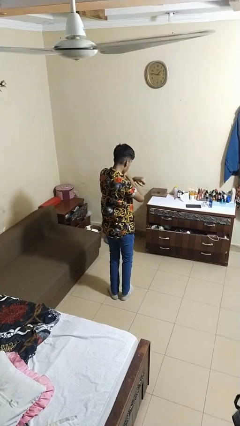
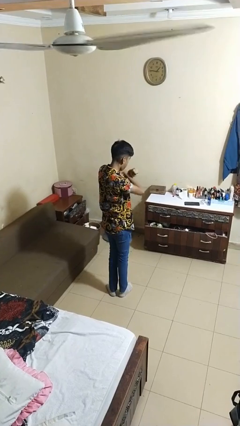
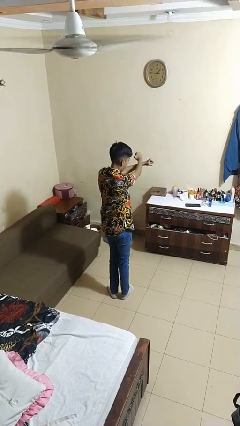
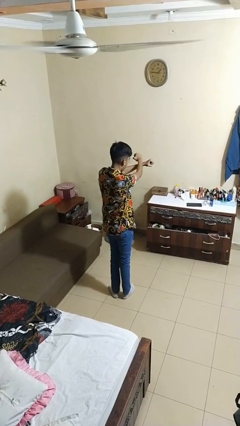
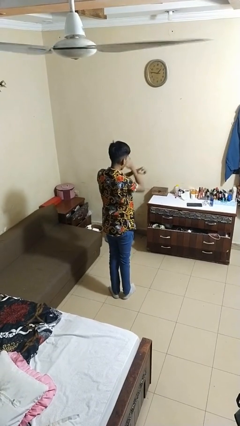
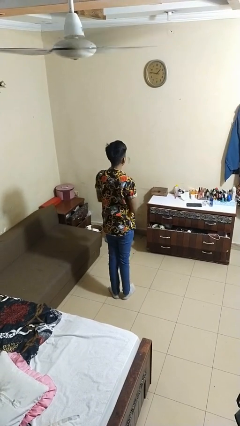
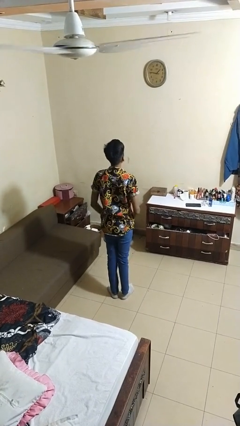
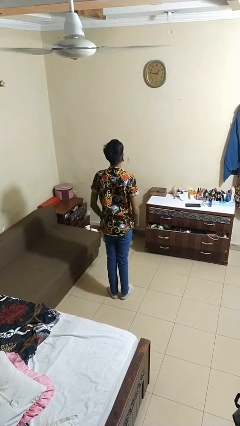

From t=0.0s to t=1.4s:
person karate chop

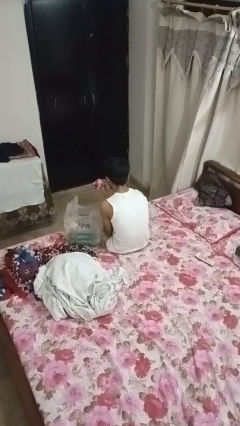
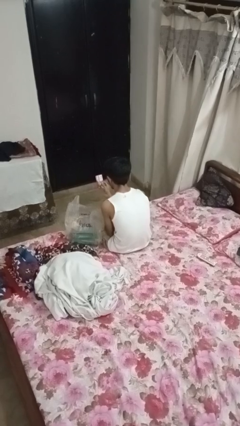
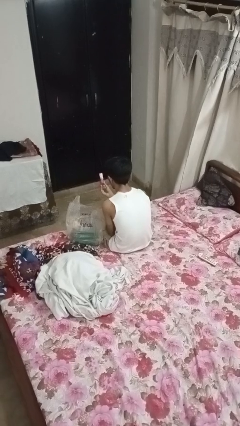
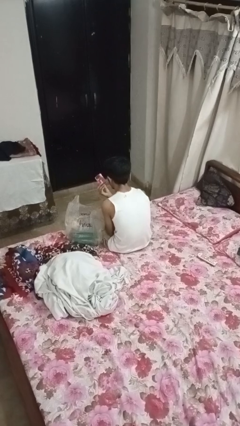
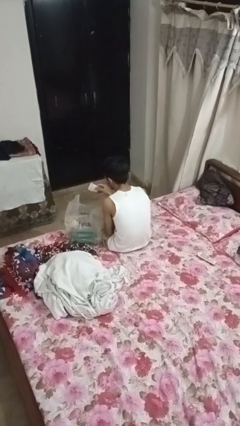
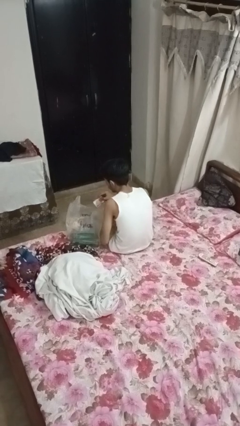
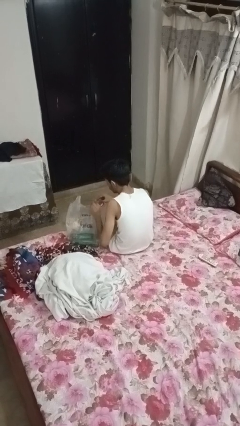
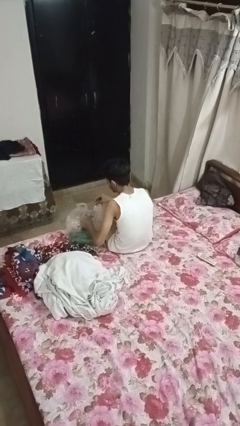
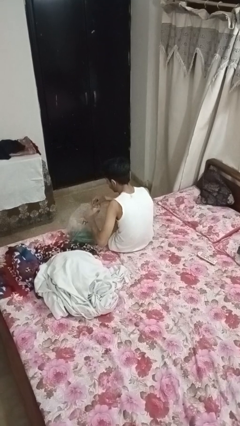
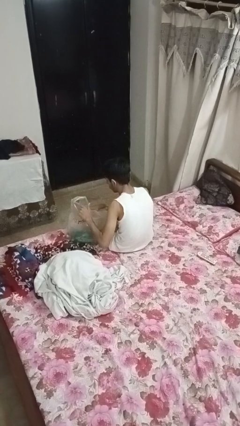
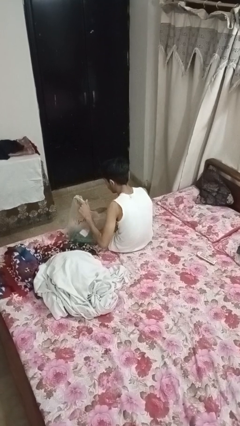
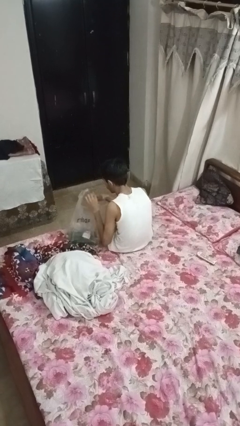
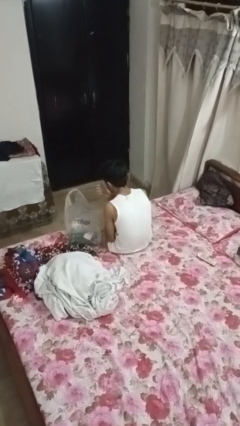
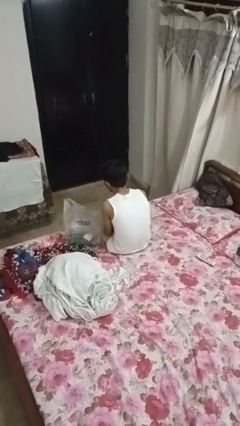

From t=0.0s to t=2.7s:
person puts object into bag

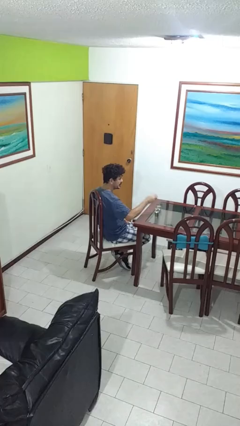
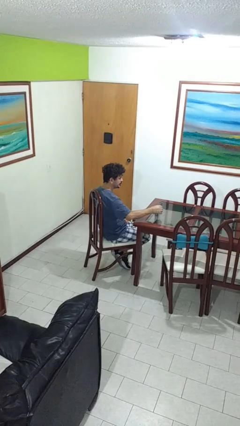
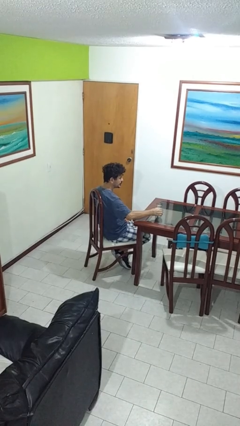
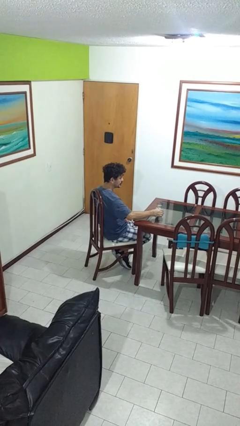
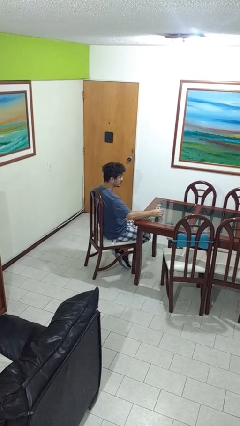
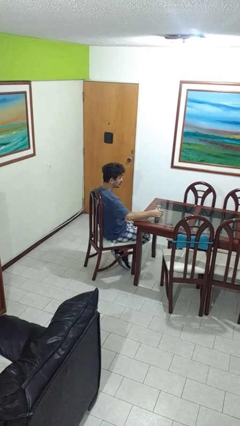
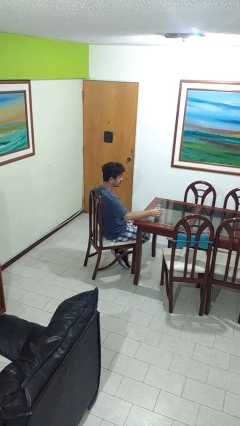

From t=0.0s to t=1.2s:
person puts down object on table

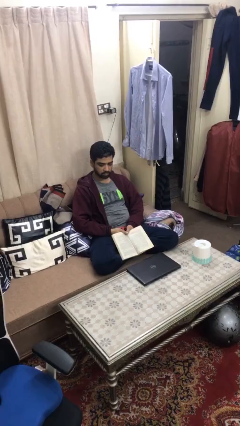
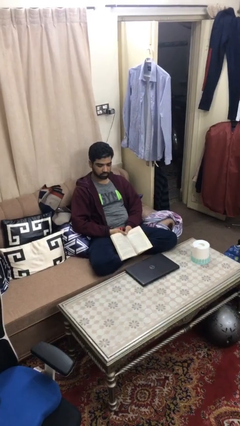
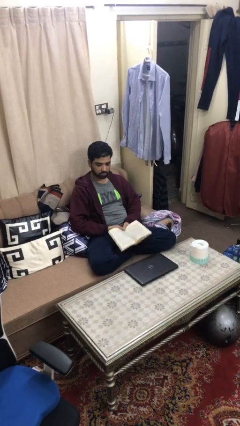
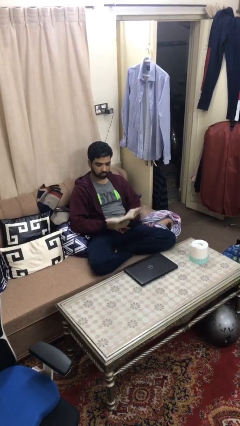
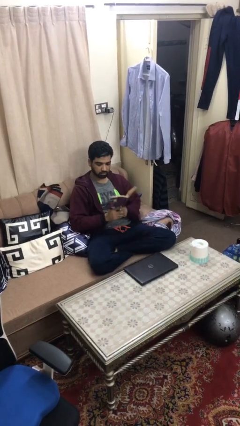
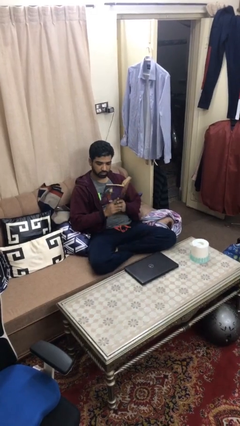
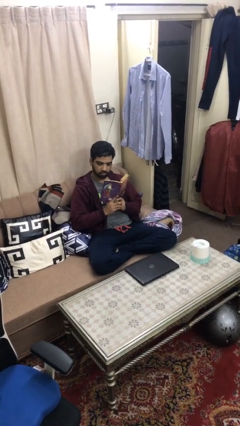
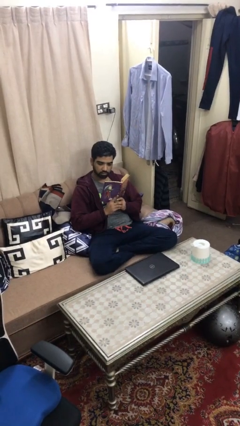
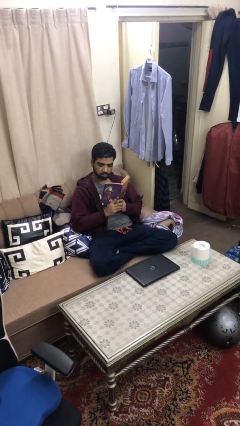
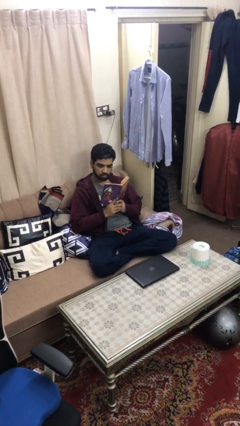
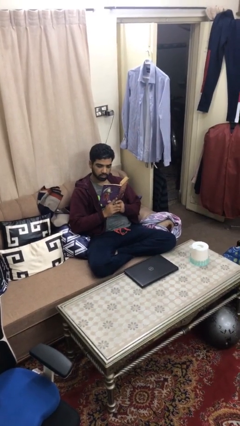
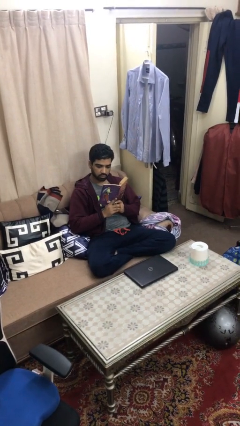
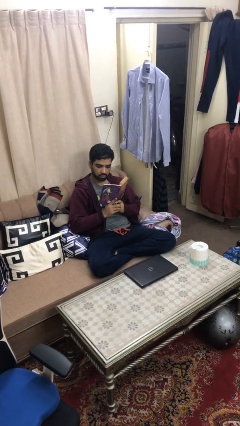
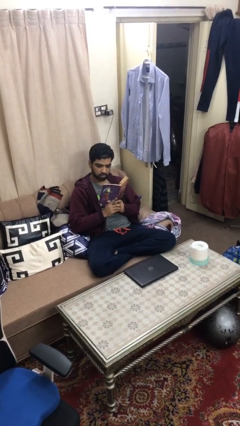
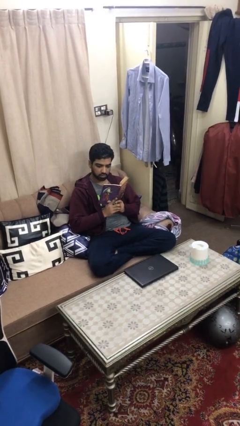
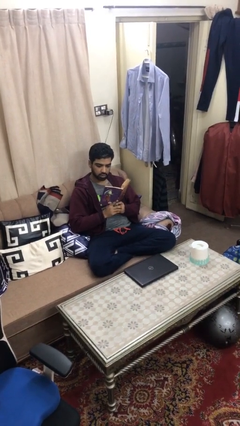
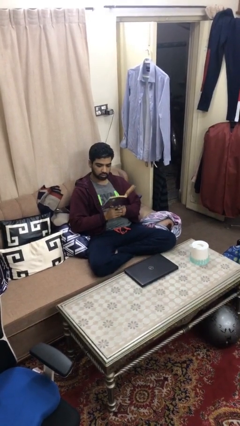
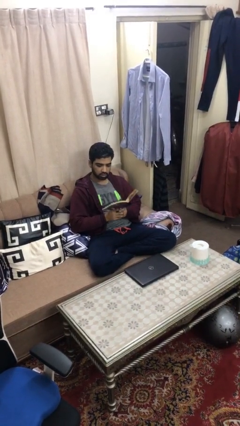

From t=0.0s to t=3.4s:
person reads document

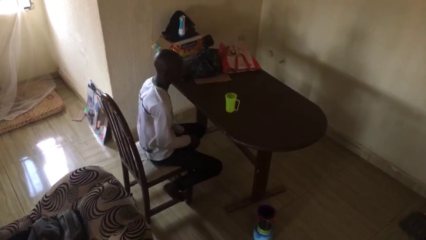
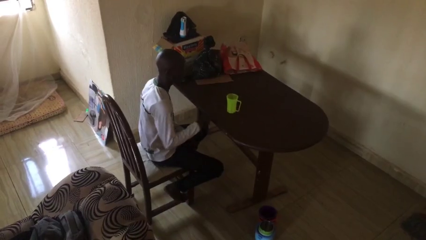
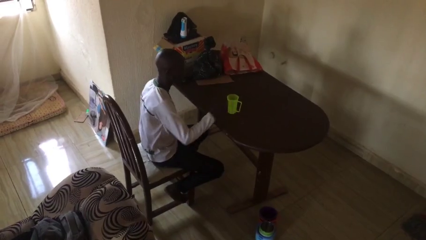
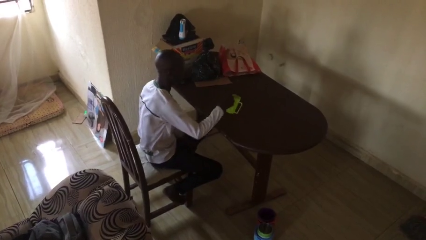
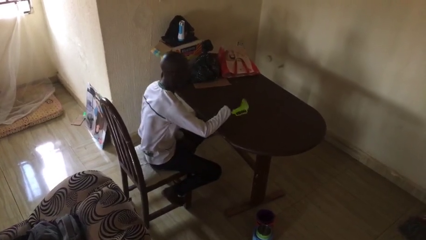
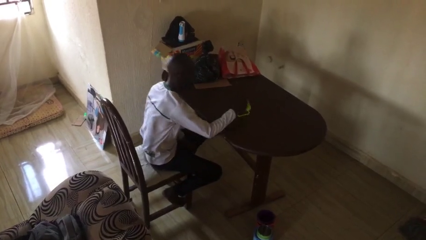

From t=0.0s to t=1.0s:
person spills on table

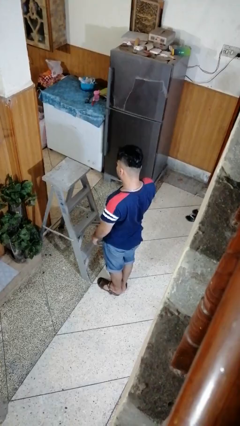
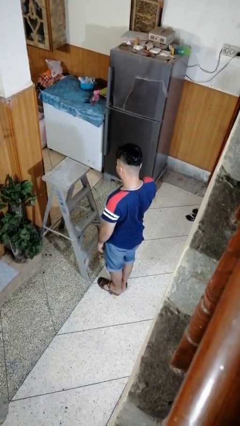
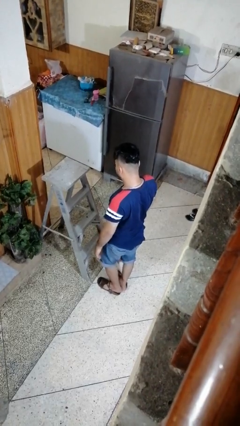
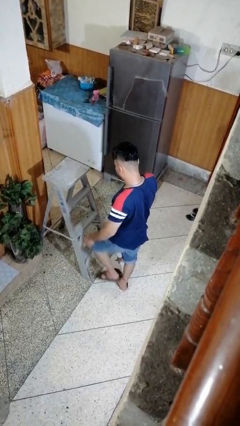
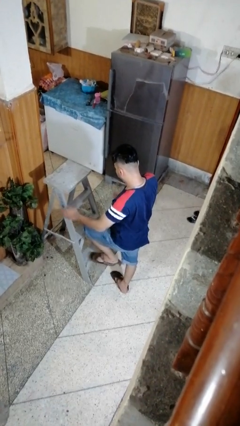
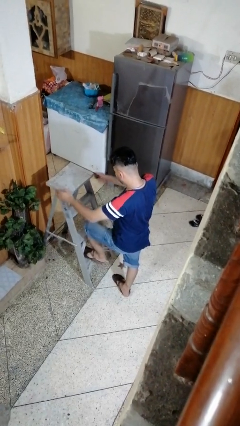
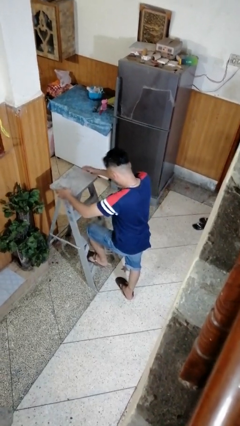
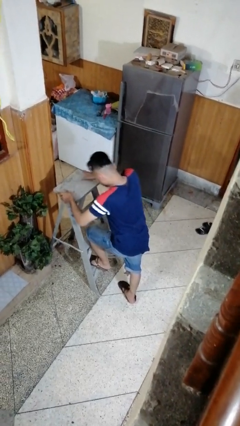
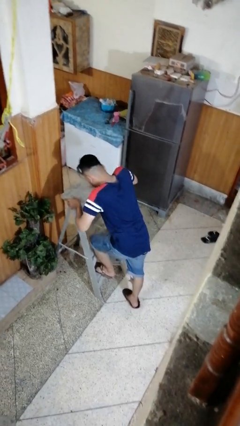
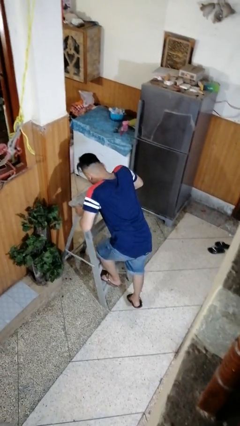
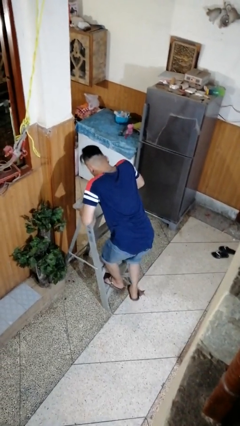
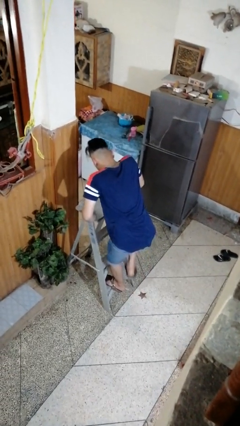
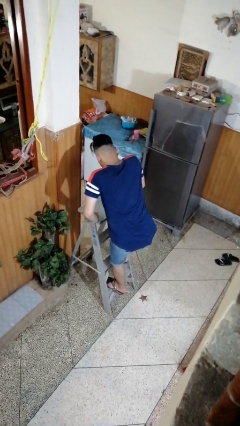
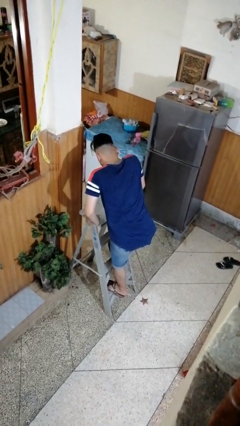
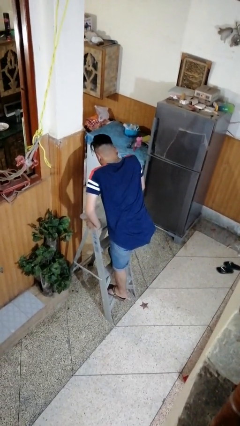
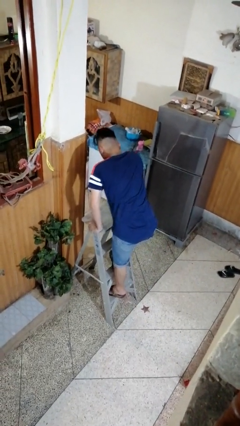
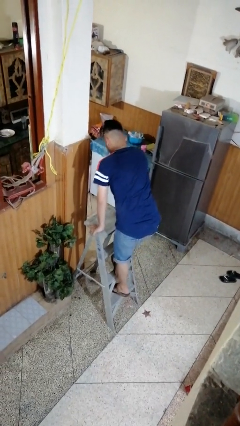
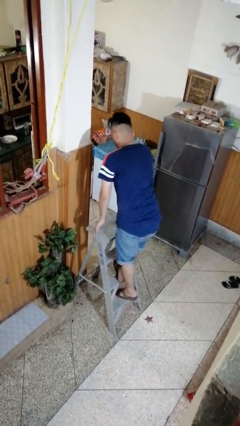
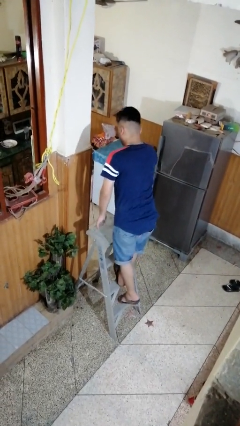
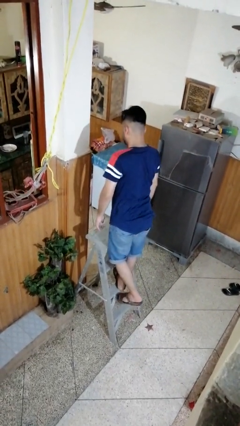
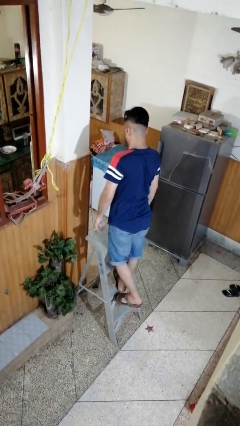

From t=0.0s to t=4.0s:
person climbs up ladder

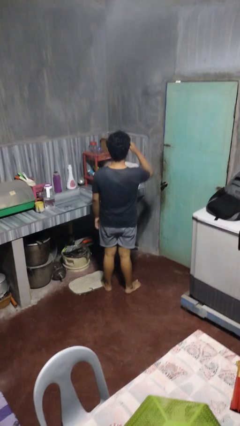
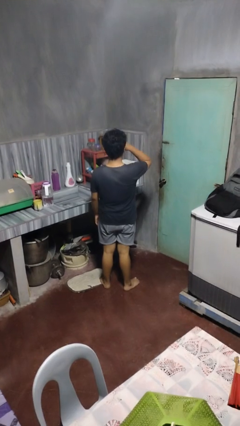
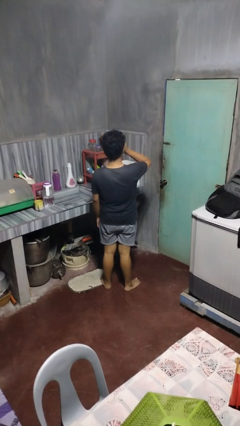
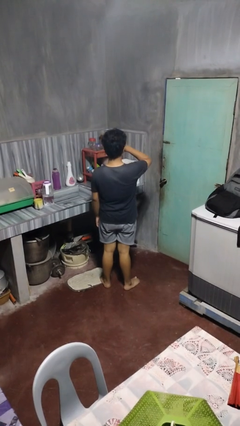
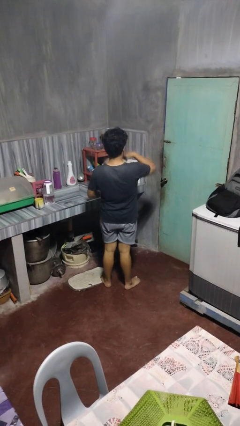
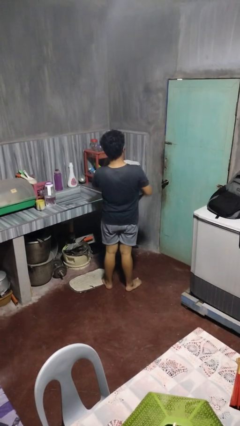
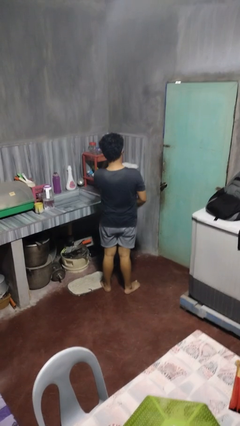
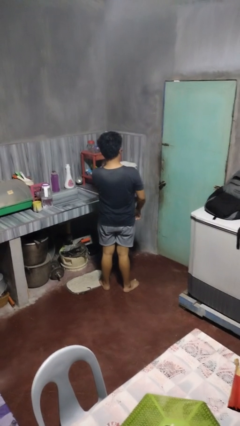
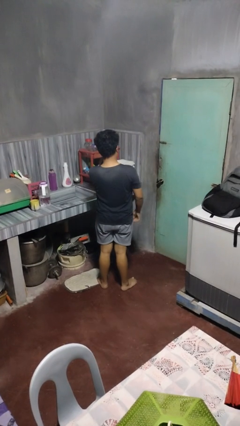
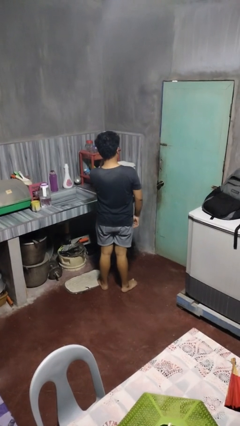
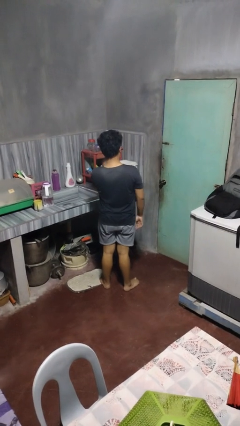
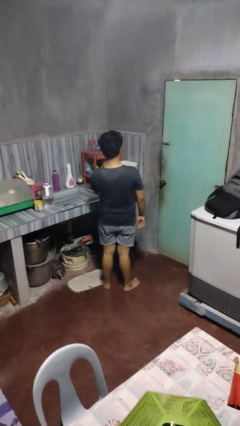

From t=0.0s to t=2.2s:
person rubs eyes

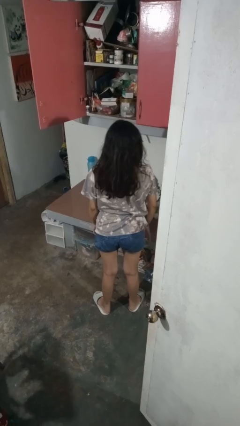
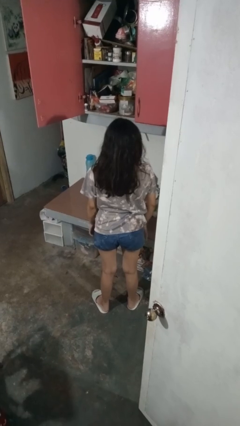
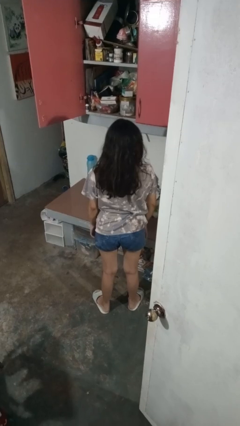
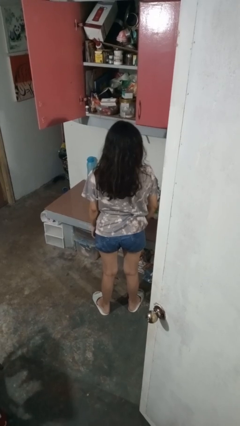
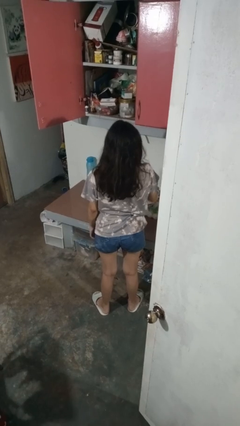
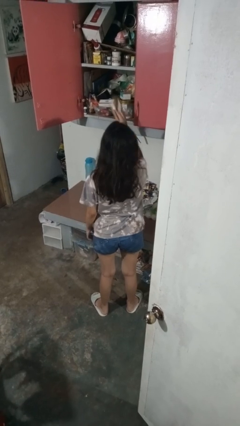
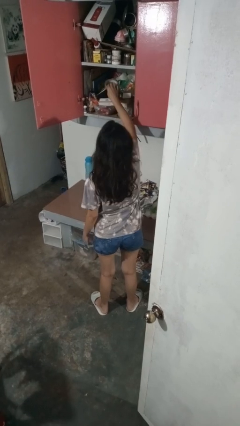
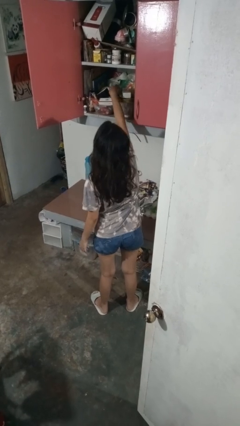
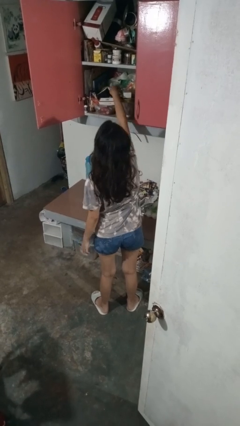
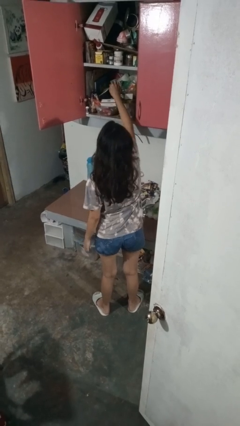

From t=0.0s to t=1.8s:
person puts object in cabinet
